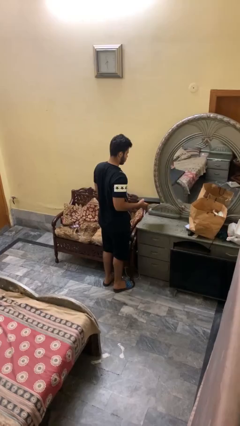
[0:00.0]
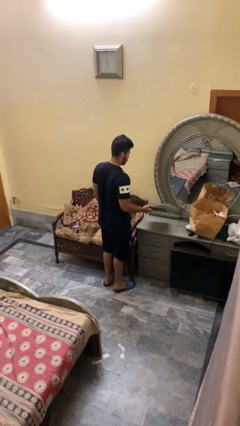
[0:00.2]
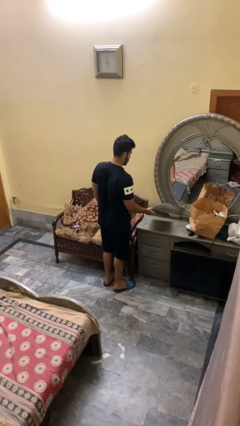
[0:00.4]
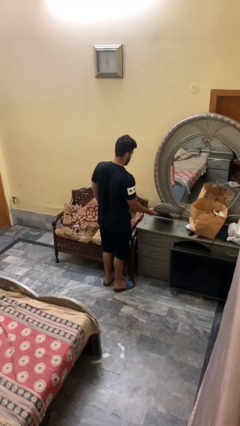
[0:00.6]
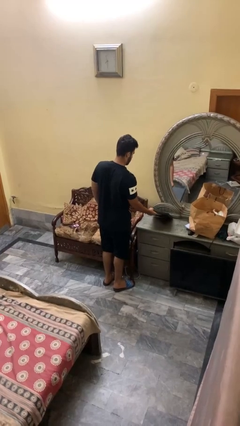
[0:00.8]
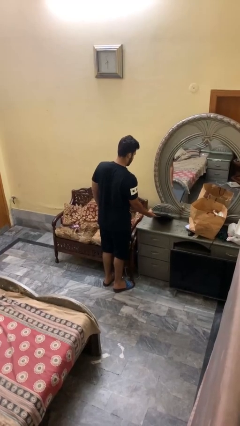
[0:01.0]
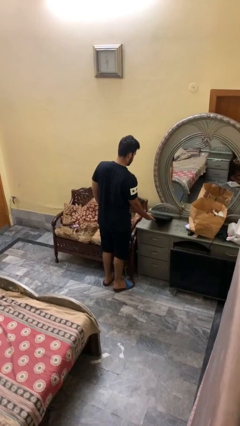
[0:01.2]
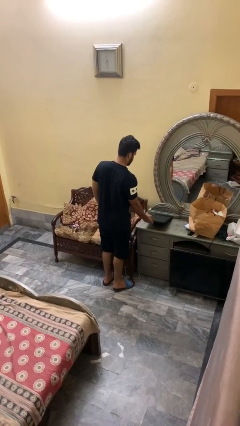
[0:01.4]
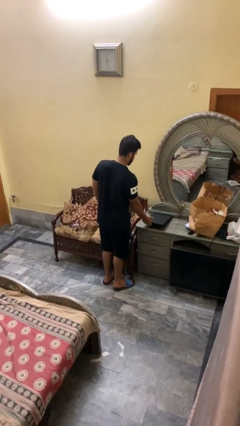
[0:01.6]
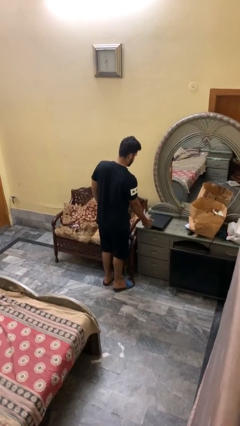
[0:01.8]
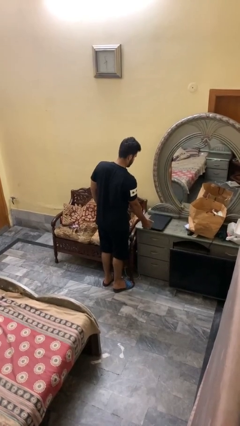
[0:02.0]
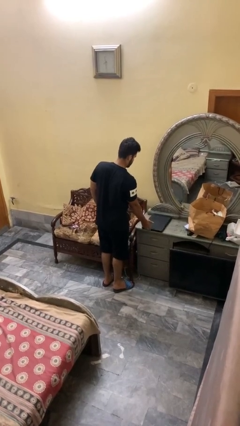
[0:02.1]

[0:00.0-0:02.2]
person puts down object on countertop

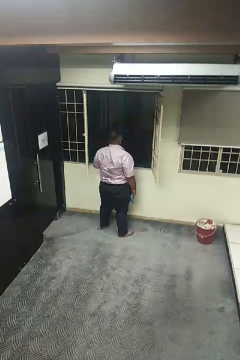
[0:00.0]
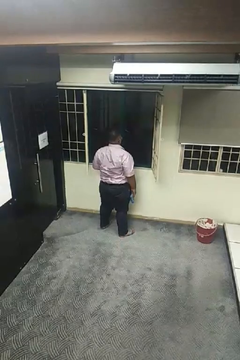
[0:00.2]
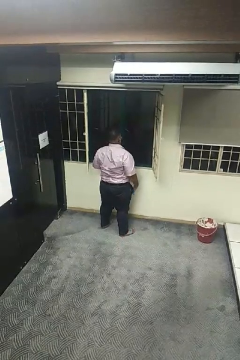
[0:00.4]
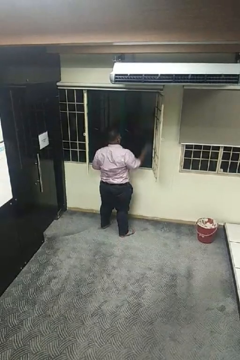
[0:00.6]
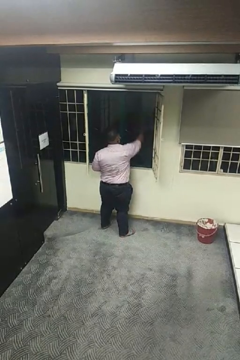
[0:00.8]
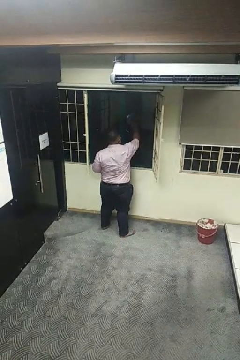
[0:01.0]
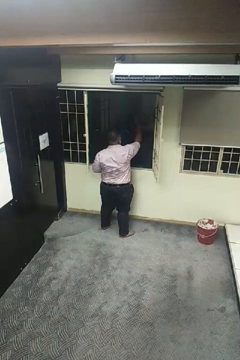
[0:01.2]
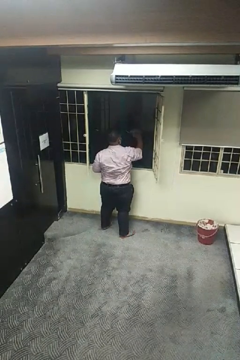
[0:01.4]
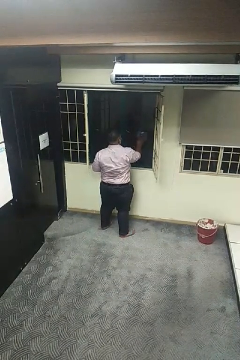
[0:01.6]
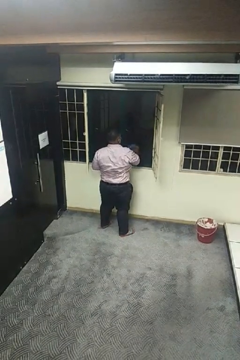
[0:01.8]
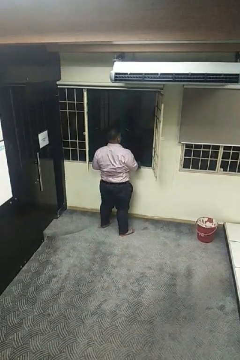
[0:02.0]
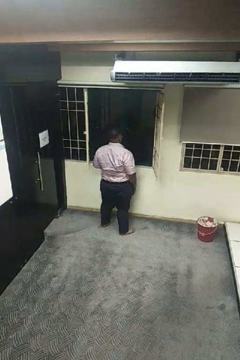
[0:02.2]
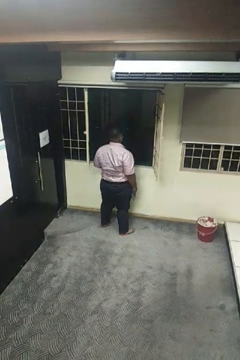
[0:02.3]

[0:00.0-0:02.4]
person washes window

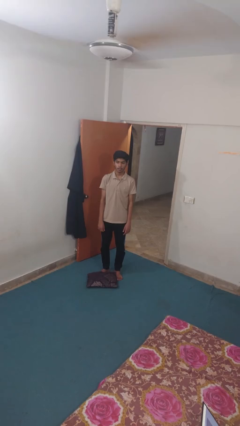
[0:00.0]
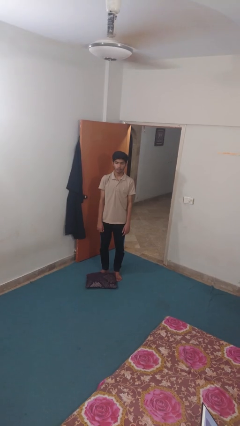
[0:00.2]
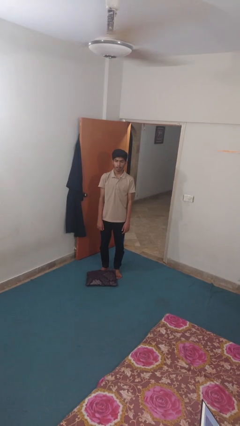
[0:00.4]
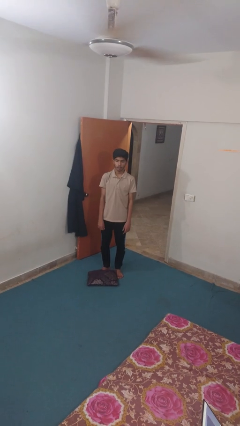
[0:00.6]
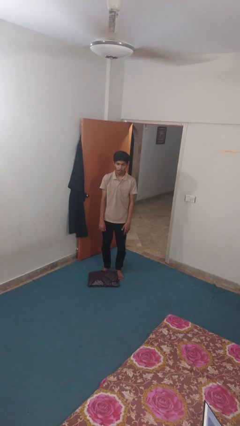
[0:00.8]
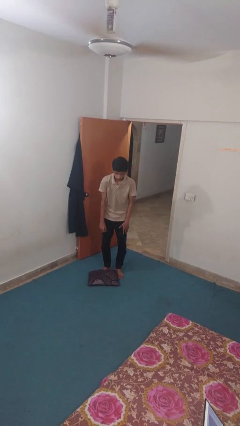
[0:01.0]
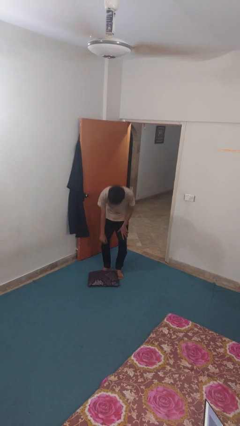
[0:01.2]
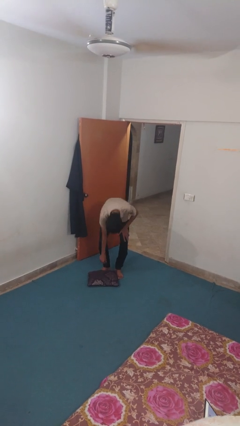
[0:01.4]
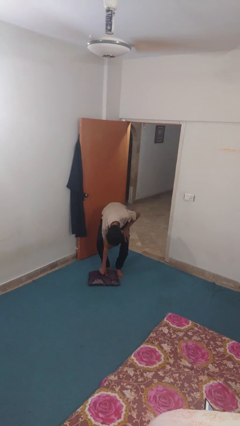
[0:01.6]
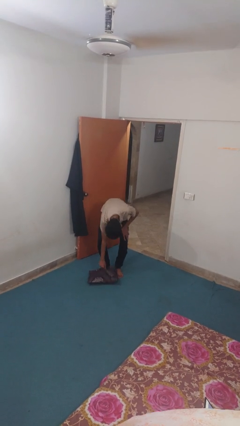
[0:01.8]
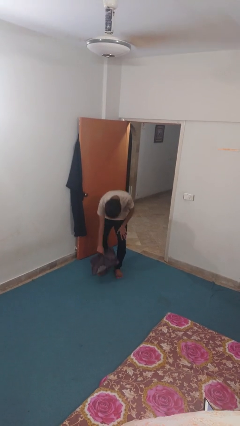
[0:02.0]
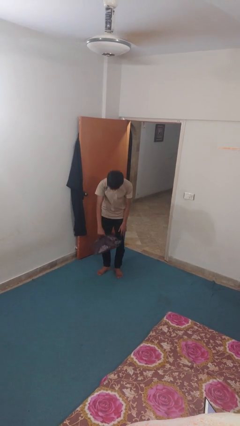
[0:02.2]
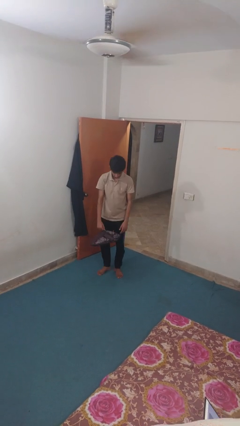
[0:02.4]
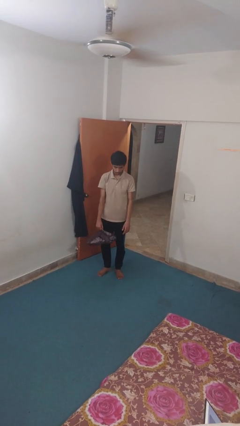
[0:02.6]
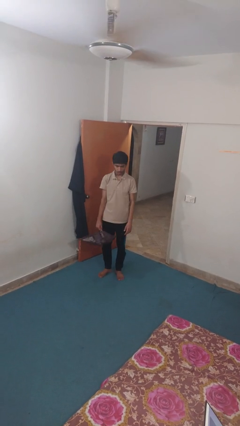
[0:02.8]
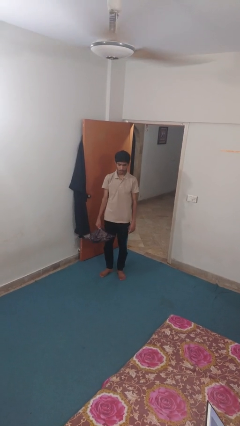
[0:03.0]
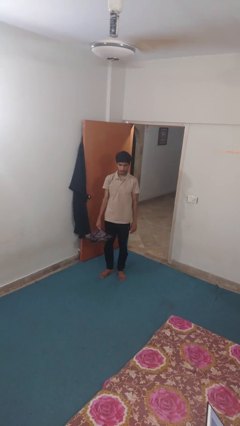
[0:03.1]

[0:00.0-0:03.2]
person picks up object from floor

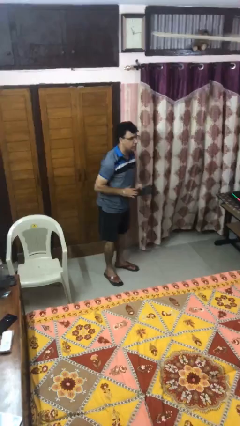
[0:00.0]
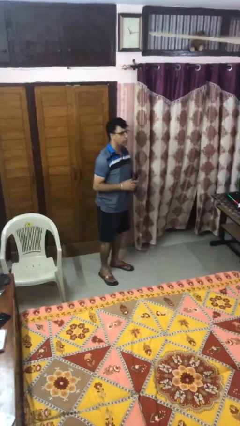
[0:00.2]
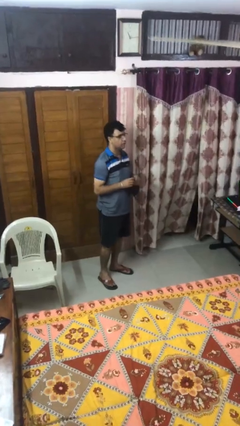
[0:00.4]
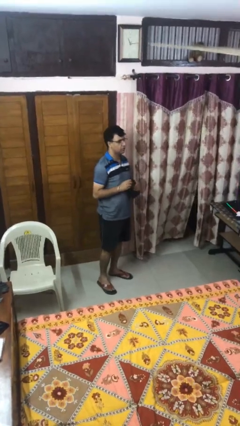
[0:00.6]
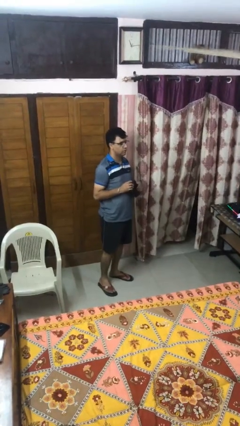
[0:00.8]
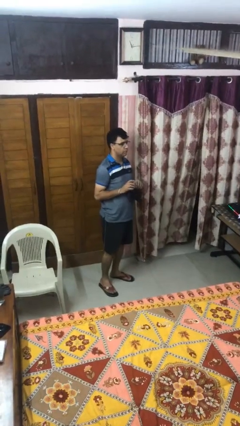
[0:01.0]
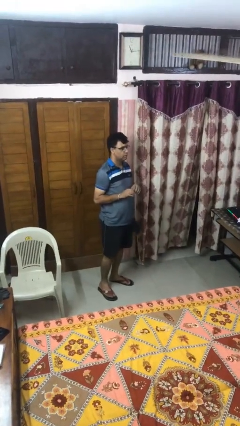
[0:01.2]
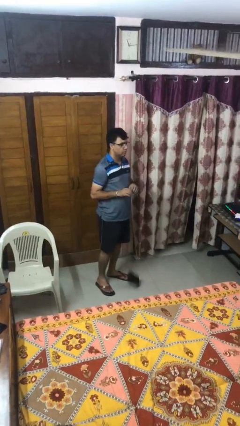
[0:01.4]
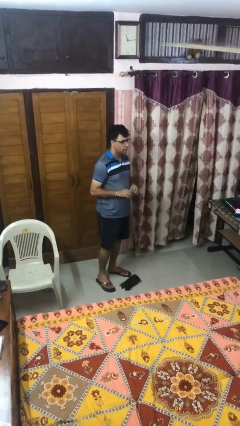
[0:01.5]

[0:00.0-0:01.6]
person drops object

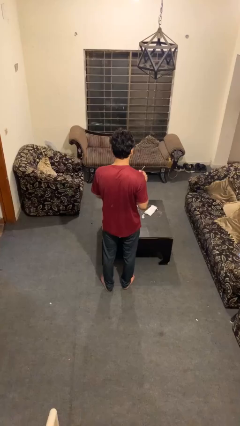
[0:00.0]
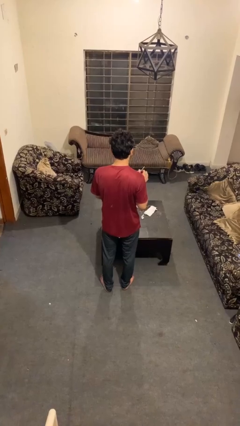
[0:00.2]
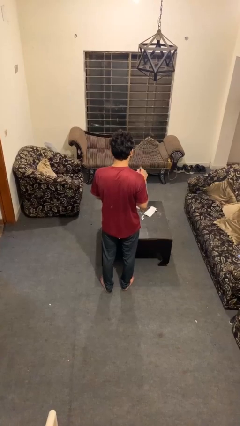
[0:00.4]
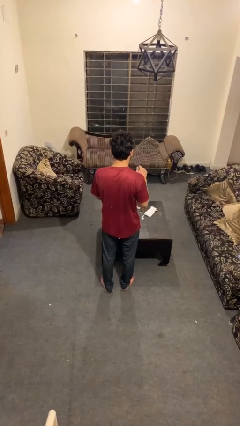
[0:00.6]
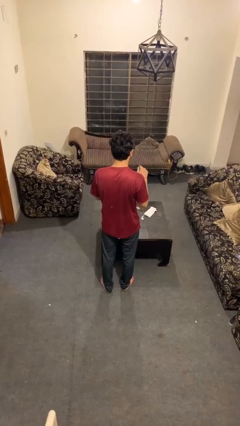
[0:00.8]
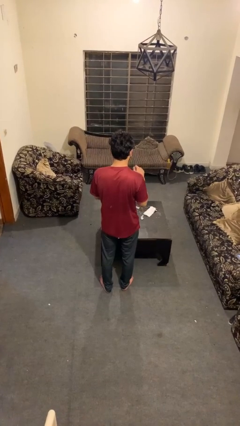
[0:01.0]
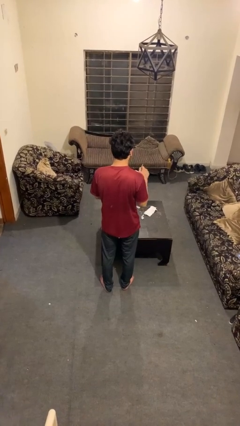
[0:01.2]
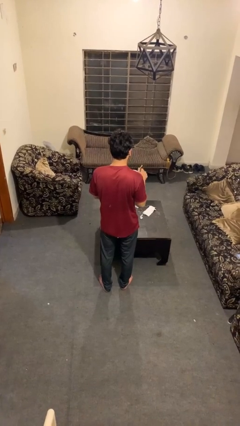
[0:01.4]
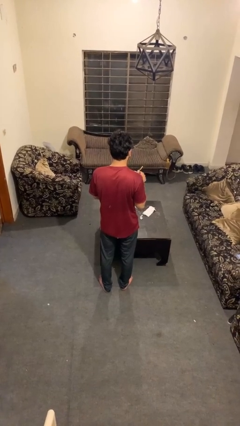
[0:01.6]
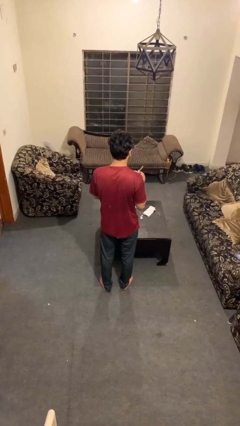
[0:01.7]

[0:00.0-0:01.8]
person stirs mug

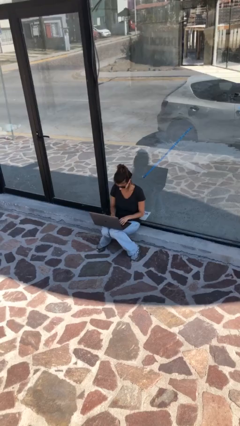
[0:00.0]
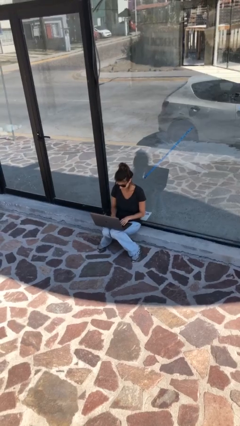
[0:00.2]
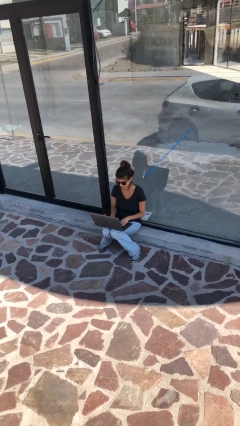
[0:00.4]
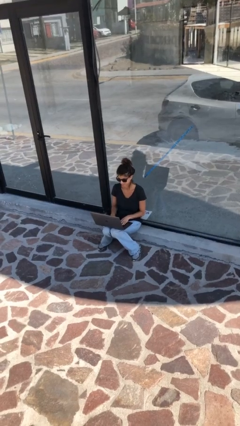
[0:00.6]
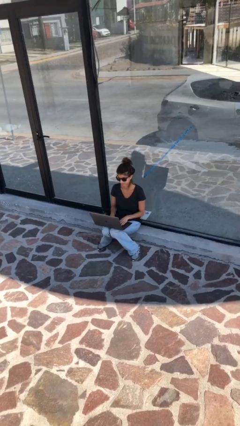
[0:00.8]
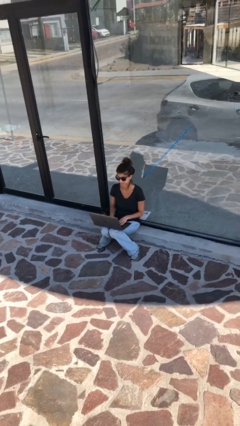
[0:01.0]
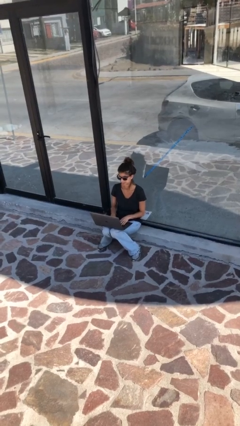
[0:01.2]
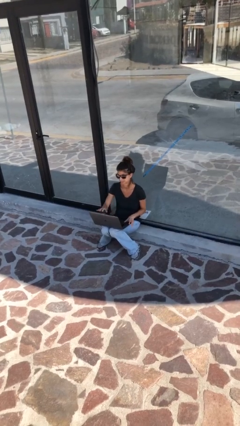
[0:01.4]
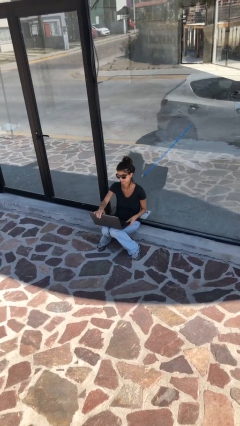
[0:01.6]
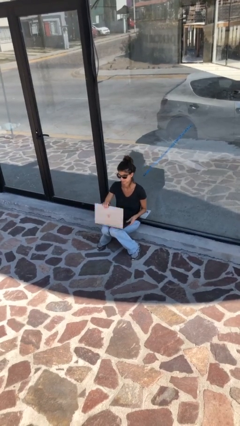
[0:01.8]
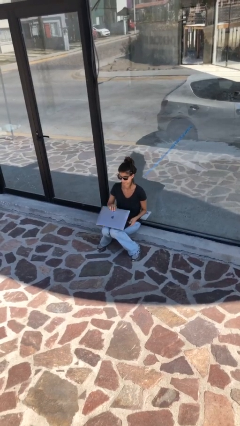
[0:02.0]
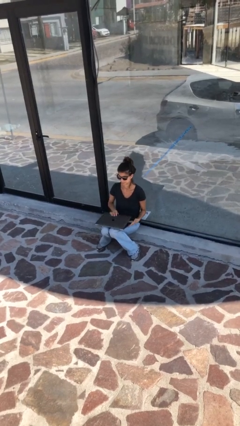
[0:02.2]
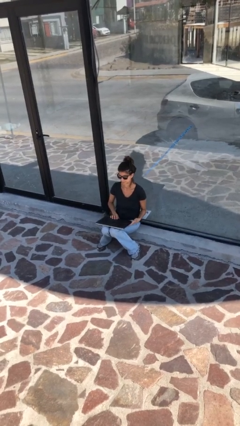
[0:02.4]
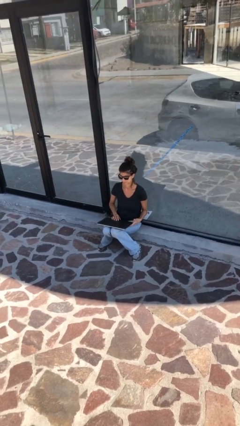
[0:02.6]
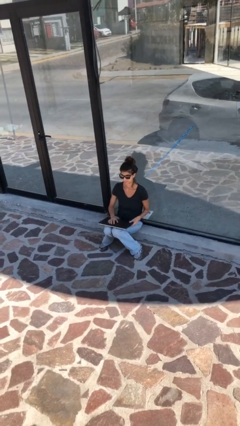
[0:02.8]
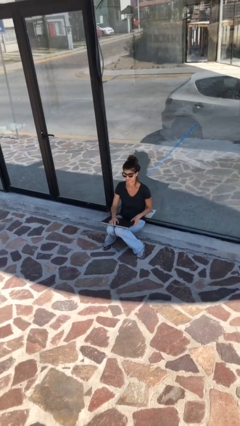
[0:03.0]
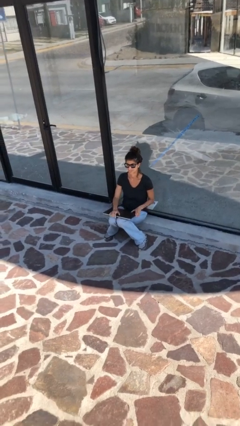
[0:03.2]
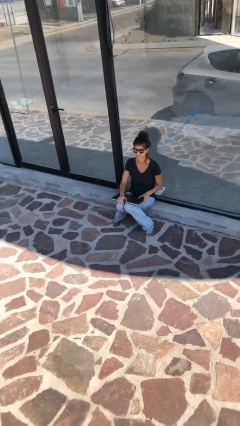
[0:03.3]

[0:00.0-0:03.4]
person interacts with laptop

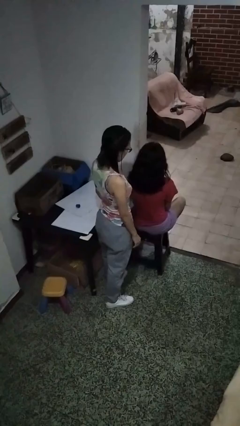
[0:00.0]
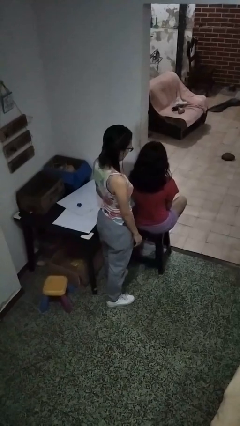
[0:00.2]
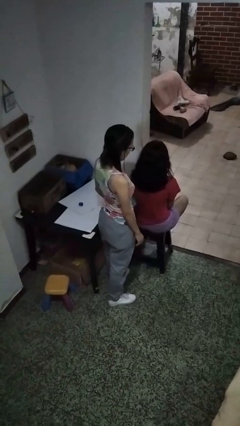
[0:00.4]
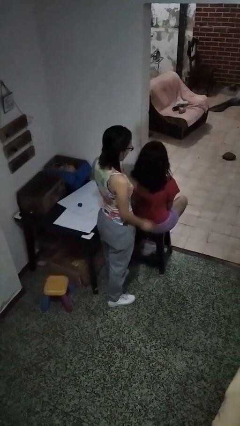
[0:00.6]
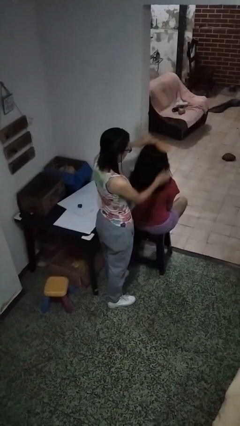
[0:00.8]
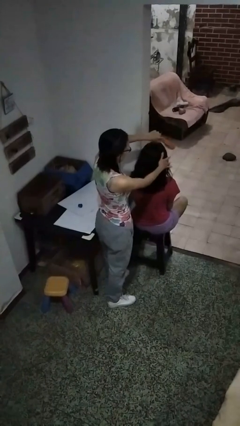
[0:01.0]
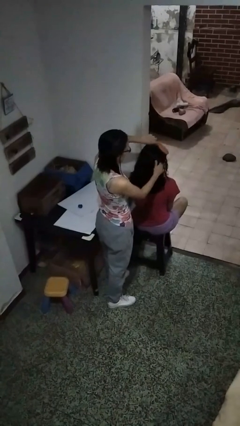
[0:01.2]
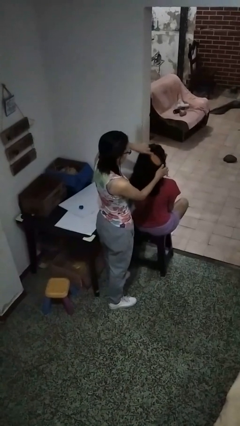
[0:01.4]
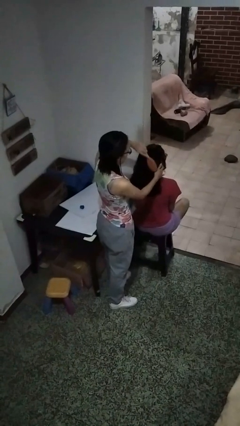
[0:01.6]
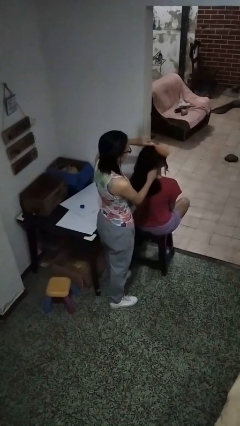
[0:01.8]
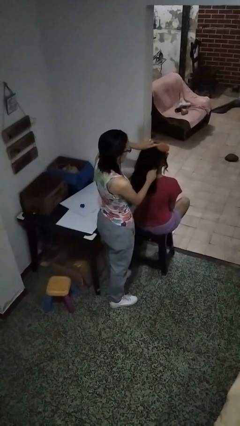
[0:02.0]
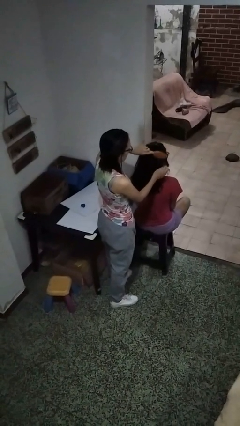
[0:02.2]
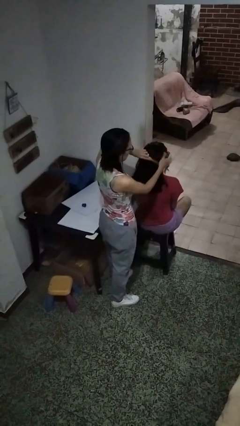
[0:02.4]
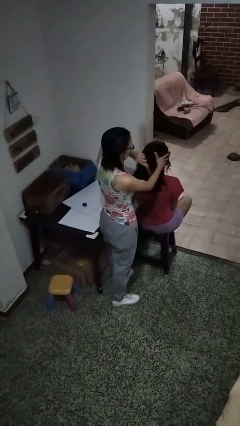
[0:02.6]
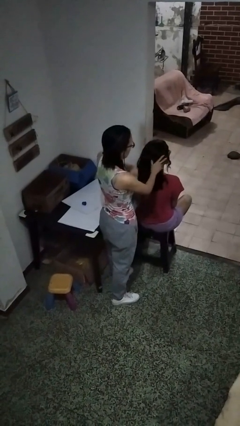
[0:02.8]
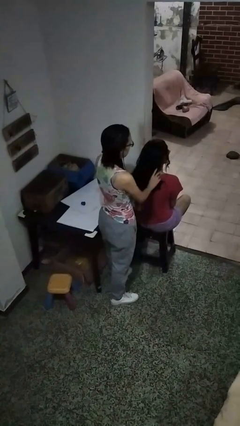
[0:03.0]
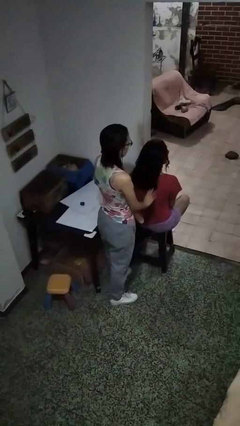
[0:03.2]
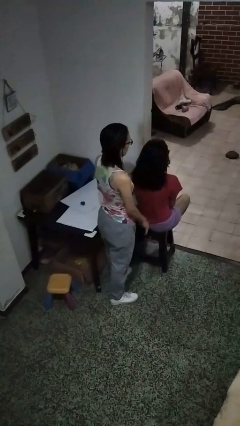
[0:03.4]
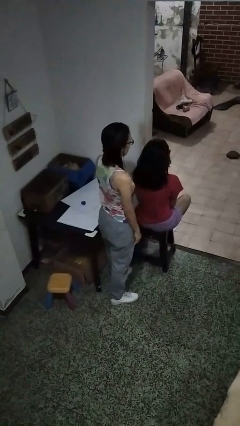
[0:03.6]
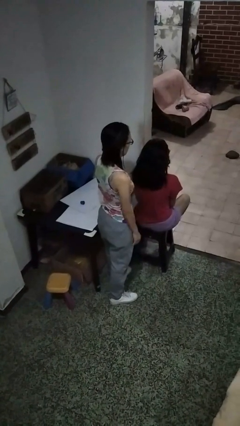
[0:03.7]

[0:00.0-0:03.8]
person brushes hair of person
